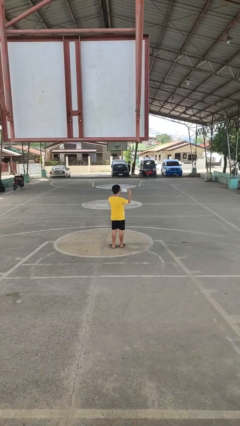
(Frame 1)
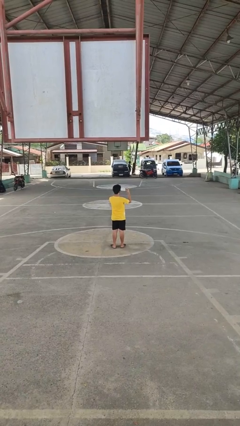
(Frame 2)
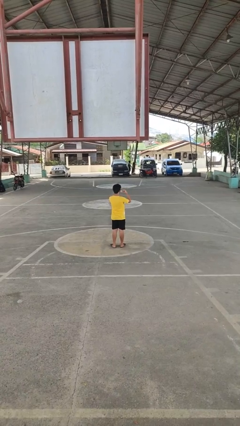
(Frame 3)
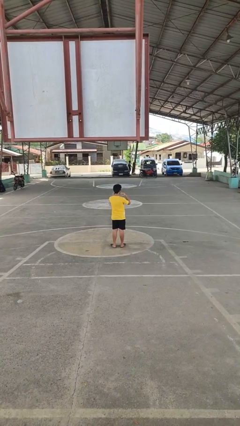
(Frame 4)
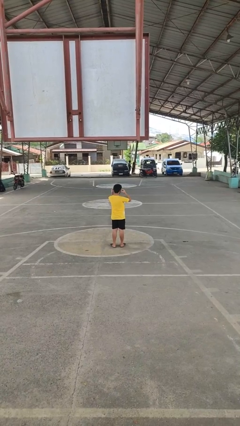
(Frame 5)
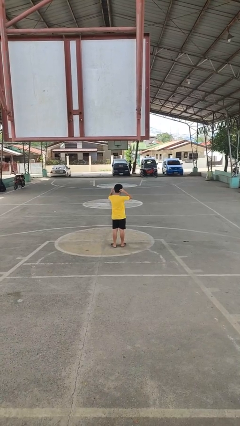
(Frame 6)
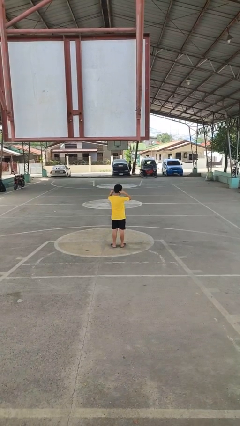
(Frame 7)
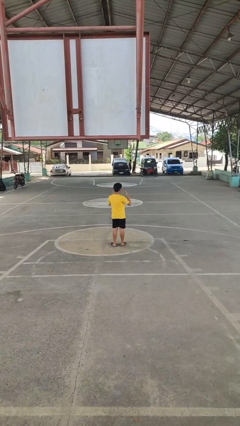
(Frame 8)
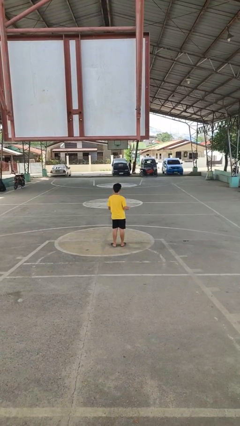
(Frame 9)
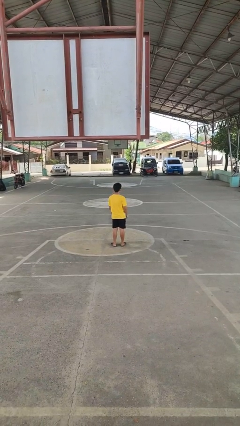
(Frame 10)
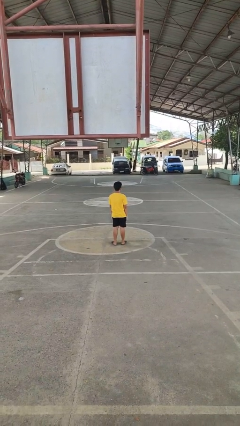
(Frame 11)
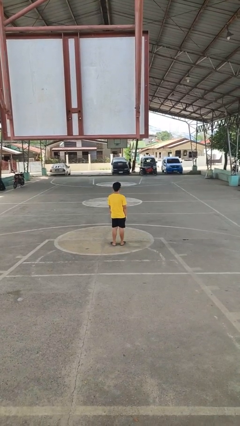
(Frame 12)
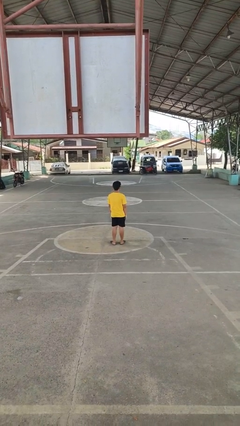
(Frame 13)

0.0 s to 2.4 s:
person puts on facemask

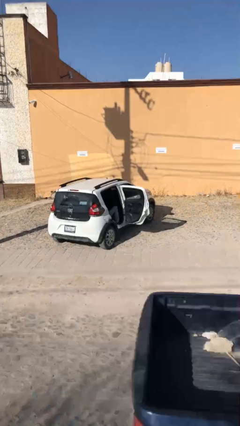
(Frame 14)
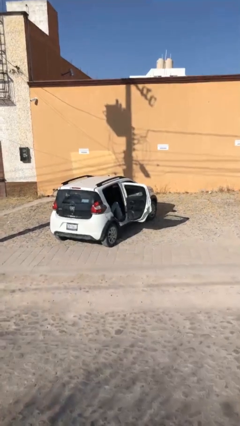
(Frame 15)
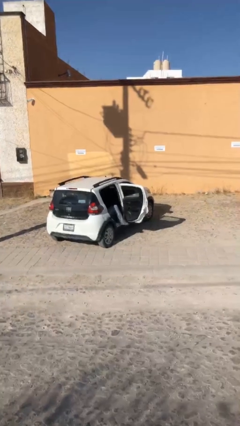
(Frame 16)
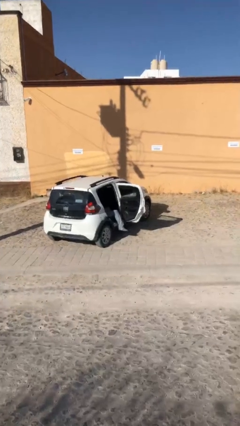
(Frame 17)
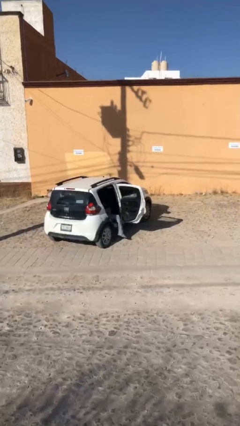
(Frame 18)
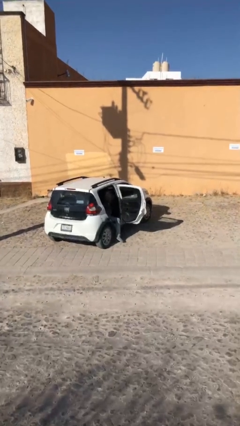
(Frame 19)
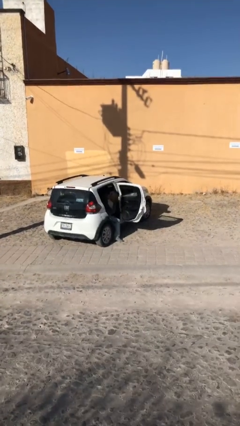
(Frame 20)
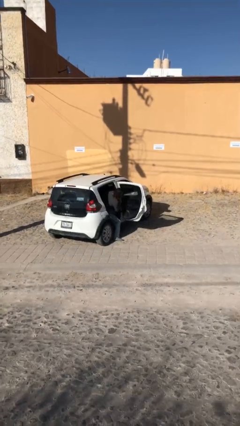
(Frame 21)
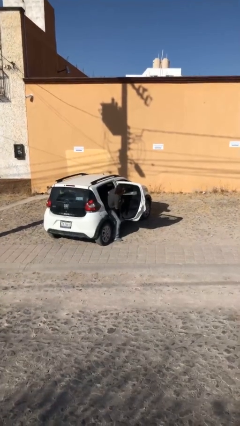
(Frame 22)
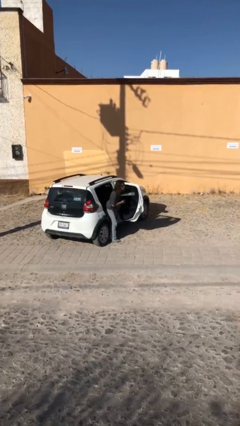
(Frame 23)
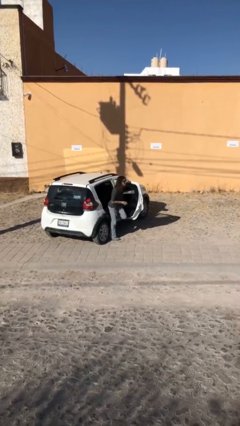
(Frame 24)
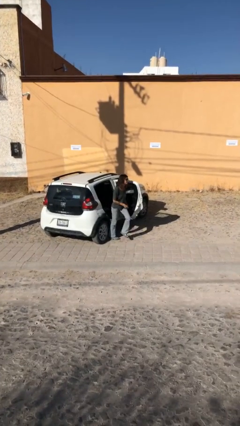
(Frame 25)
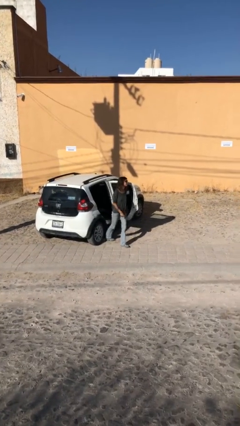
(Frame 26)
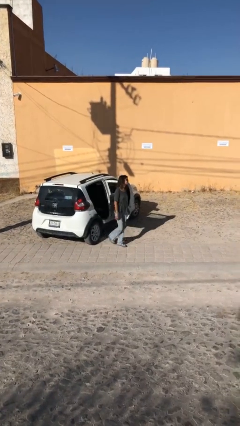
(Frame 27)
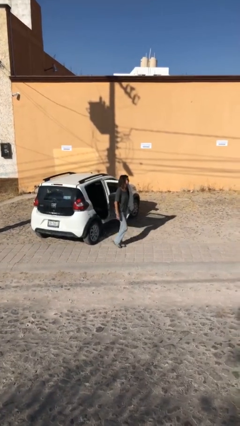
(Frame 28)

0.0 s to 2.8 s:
person exits car

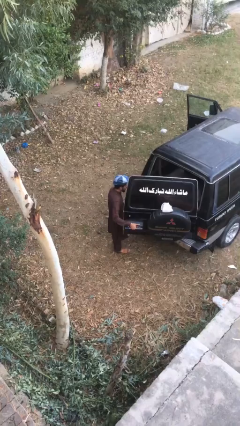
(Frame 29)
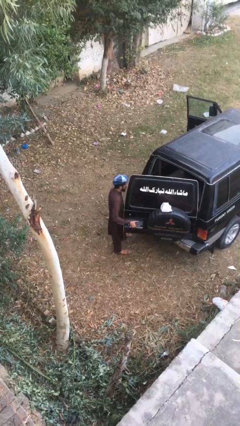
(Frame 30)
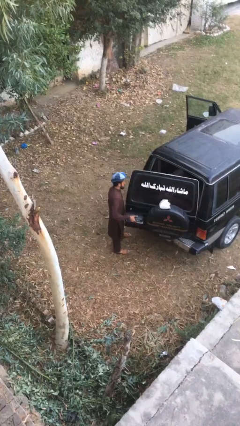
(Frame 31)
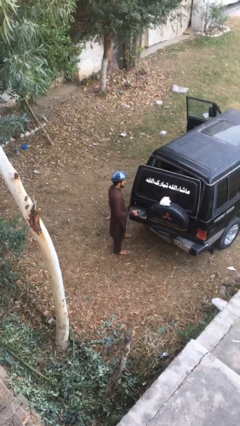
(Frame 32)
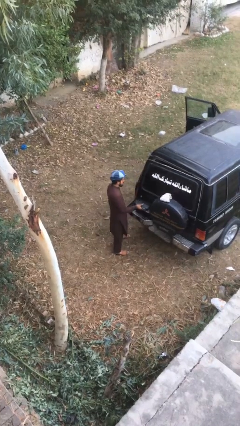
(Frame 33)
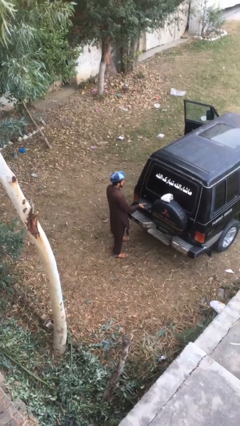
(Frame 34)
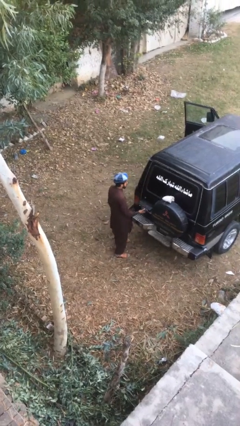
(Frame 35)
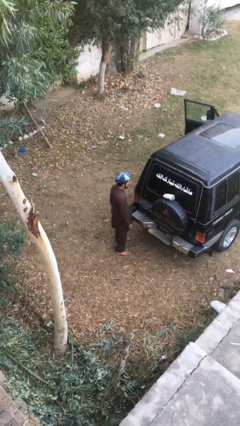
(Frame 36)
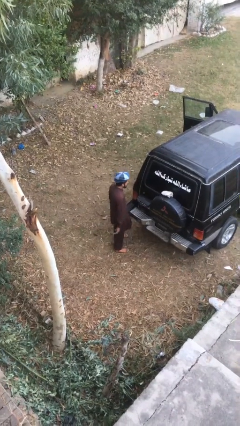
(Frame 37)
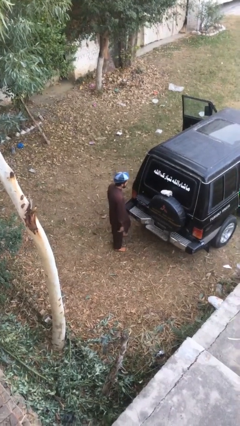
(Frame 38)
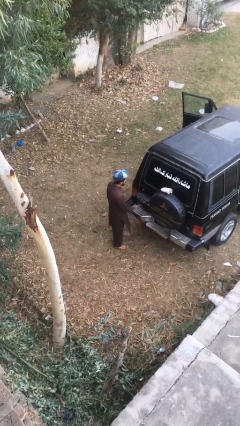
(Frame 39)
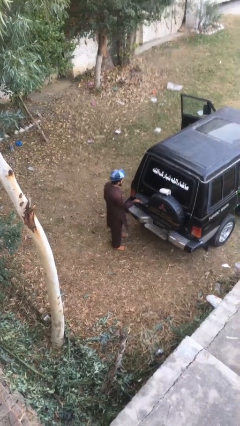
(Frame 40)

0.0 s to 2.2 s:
person closes car trunk

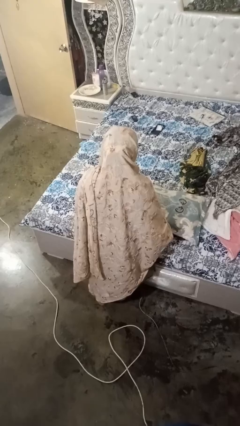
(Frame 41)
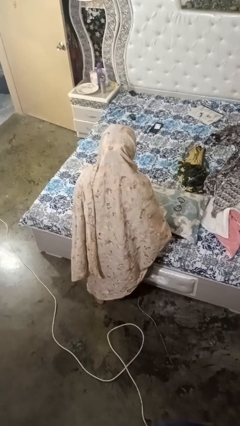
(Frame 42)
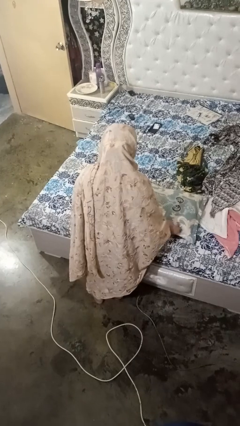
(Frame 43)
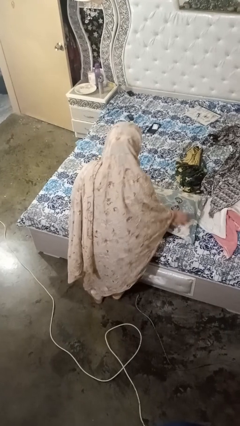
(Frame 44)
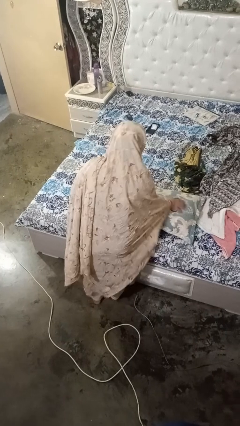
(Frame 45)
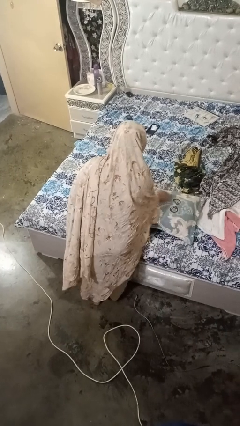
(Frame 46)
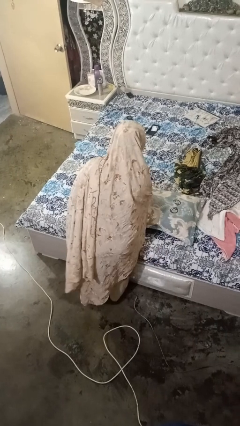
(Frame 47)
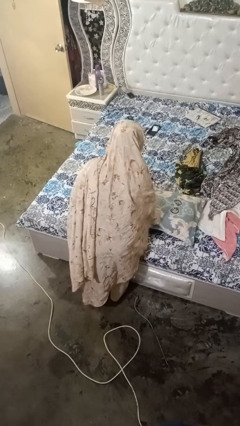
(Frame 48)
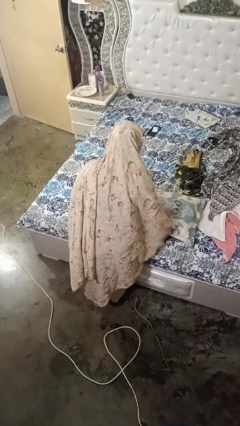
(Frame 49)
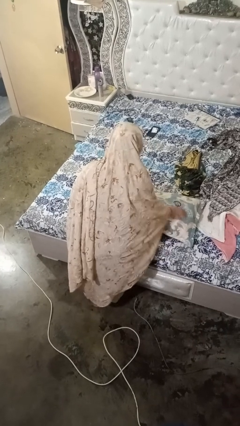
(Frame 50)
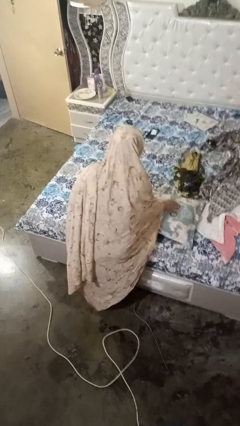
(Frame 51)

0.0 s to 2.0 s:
person waves hand over object

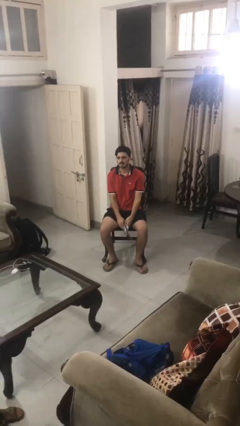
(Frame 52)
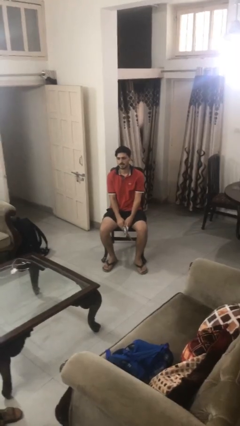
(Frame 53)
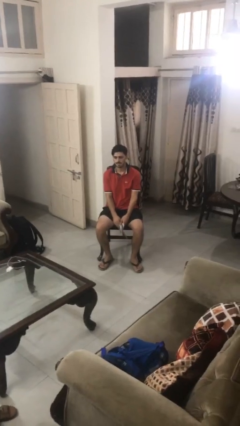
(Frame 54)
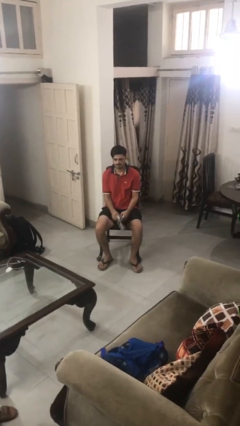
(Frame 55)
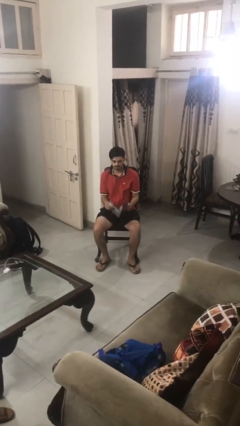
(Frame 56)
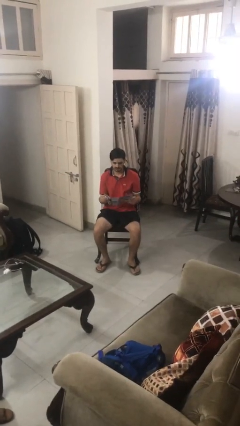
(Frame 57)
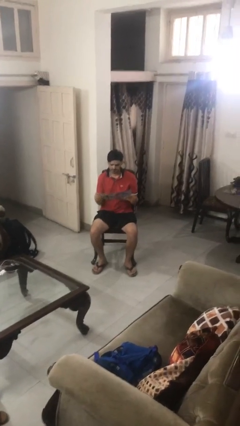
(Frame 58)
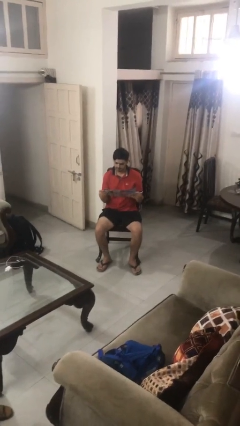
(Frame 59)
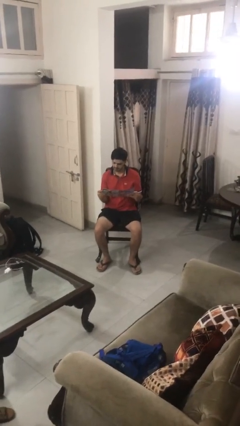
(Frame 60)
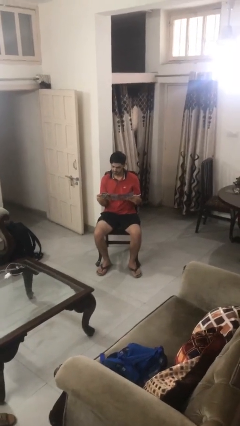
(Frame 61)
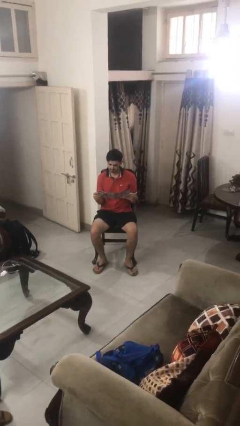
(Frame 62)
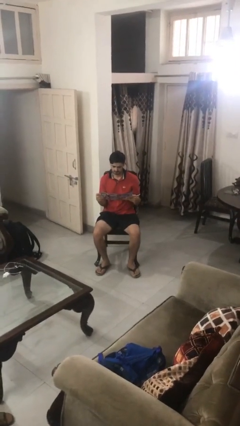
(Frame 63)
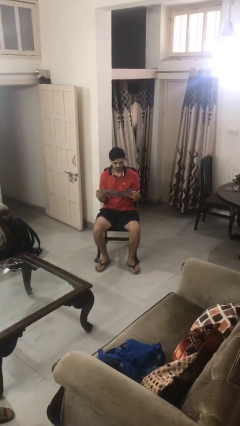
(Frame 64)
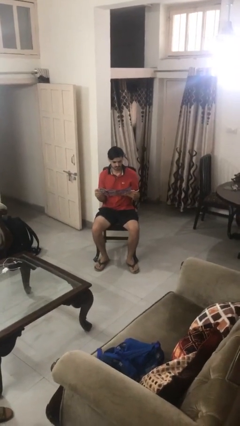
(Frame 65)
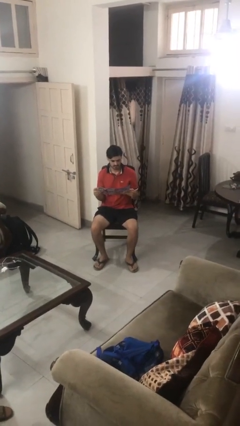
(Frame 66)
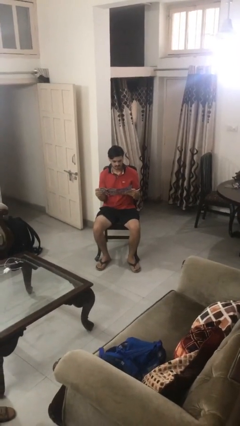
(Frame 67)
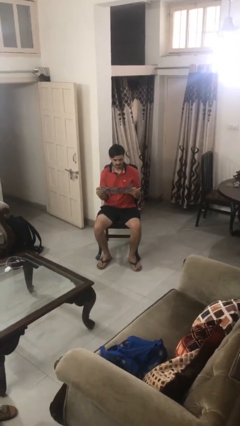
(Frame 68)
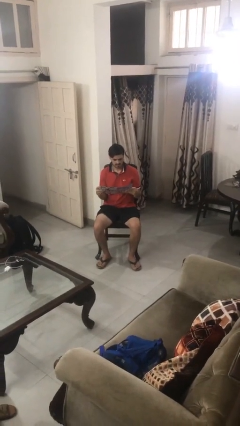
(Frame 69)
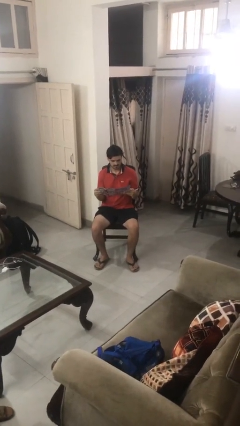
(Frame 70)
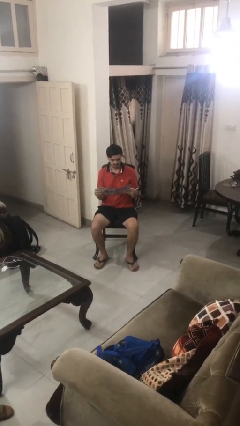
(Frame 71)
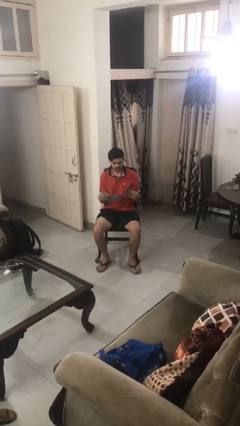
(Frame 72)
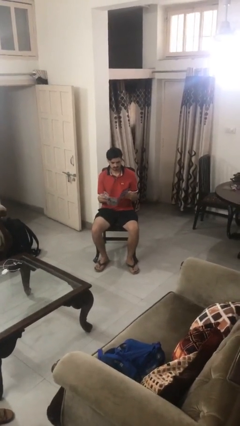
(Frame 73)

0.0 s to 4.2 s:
person reads magazine

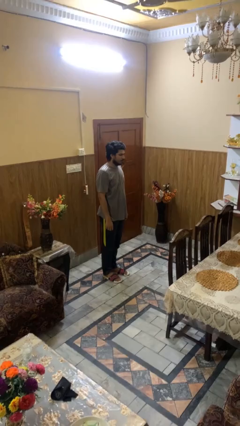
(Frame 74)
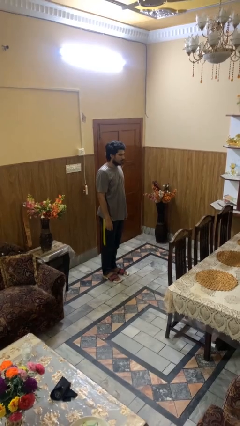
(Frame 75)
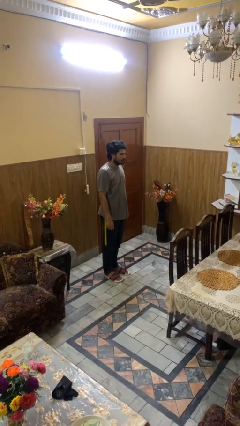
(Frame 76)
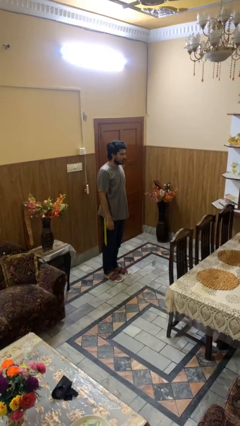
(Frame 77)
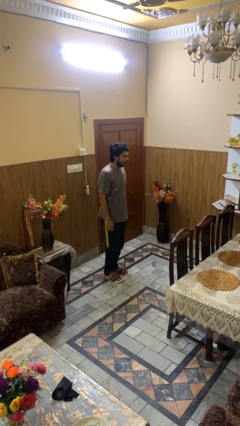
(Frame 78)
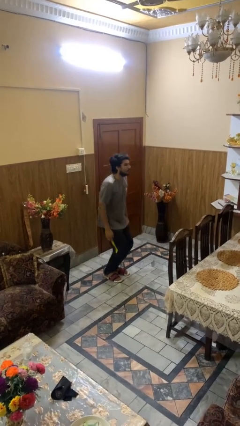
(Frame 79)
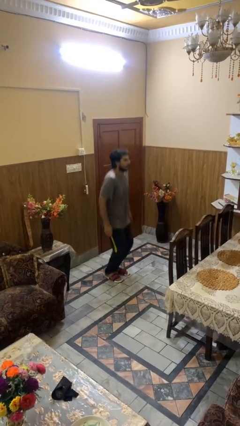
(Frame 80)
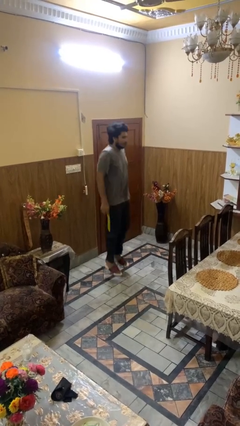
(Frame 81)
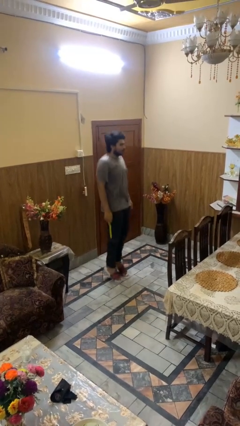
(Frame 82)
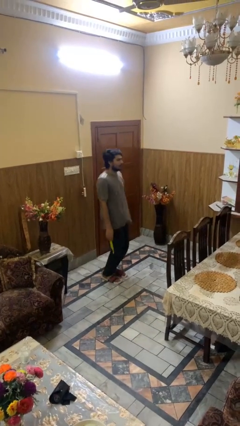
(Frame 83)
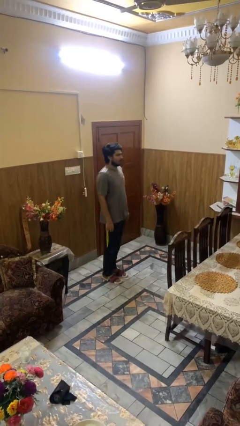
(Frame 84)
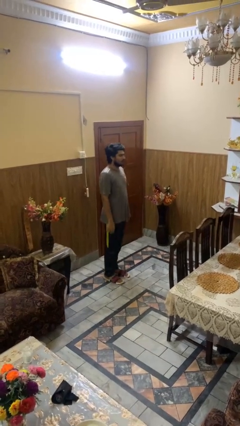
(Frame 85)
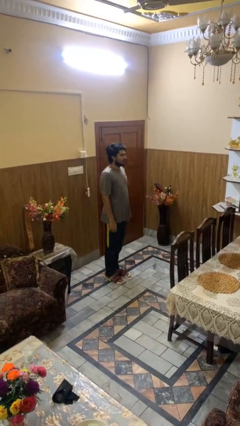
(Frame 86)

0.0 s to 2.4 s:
person jumps

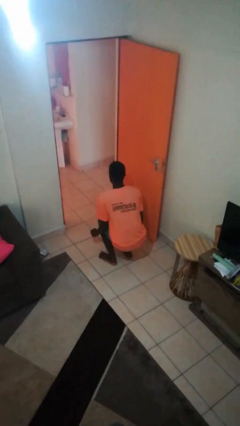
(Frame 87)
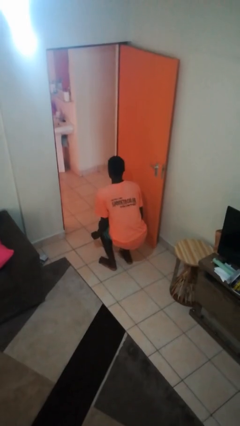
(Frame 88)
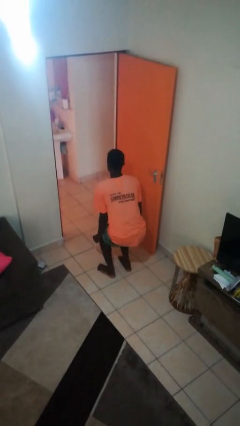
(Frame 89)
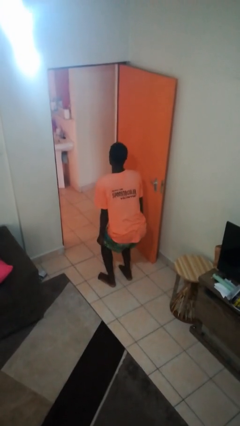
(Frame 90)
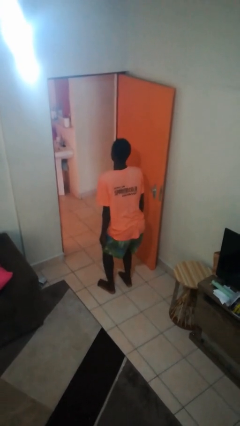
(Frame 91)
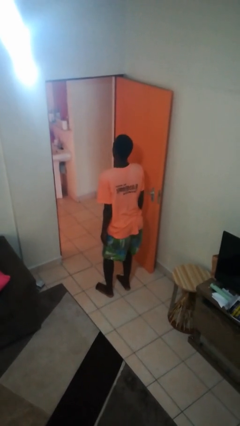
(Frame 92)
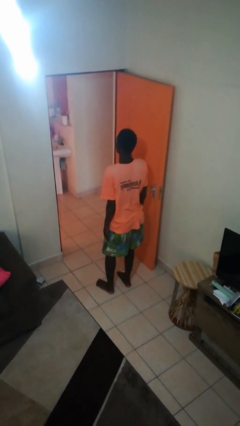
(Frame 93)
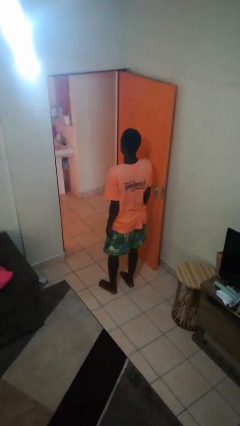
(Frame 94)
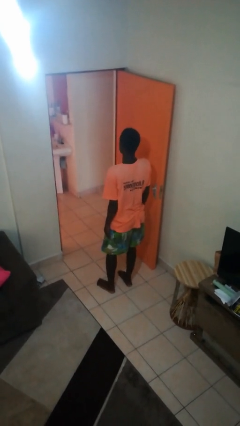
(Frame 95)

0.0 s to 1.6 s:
person stands up
